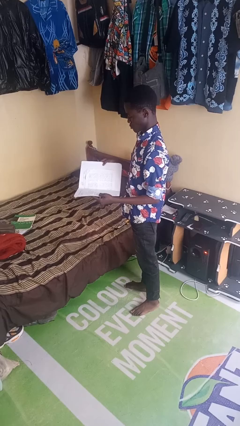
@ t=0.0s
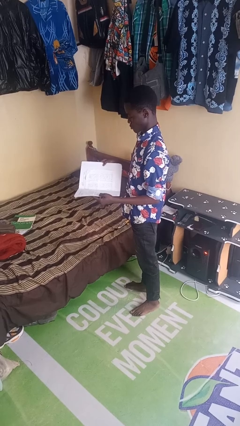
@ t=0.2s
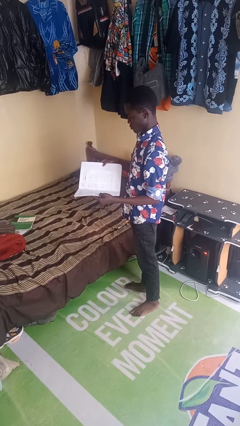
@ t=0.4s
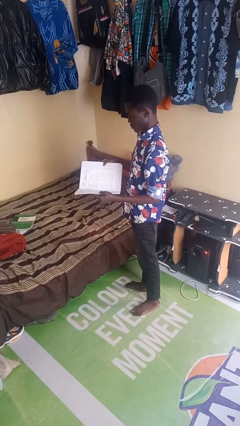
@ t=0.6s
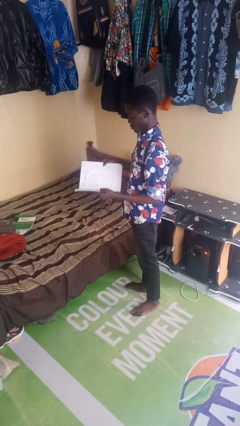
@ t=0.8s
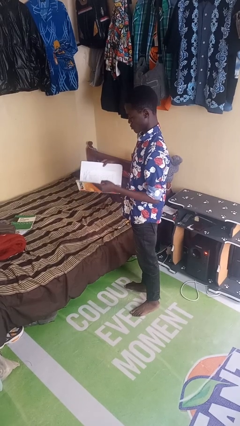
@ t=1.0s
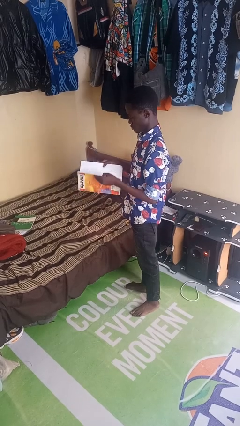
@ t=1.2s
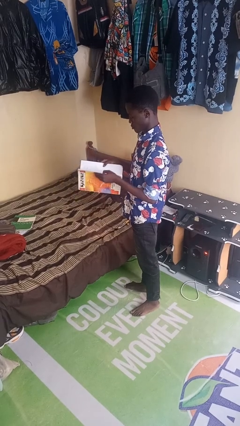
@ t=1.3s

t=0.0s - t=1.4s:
person reads book

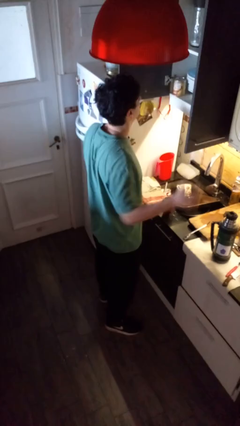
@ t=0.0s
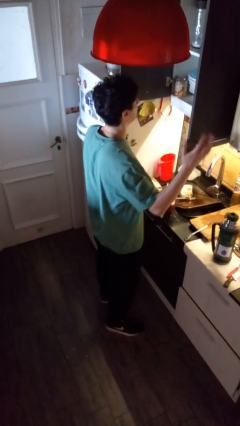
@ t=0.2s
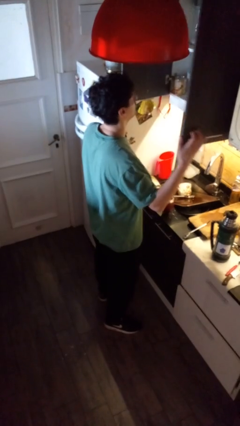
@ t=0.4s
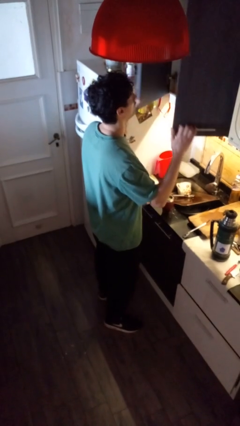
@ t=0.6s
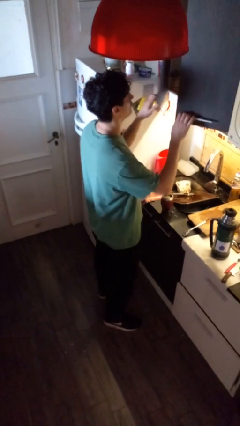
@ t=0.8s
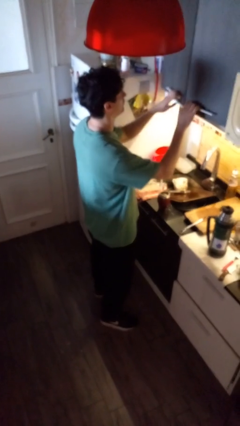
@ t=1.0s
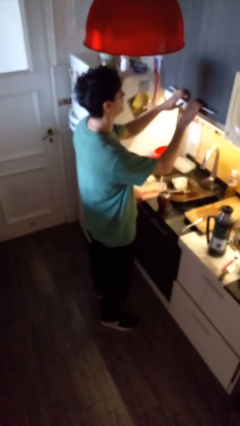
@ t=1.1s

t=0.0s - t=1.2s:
person closes kitchen drawer

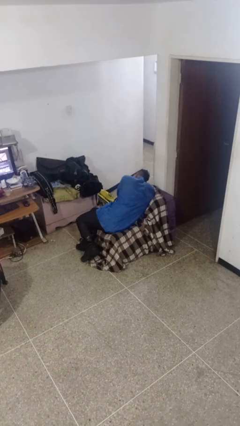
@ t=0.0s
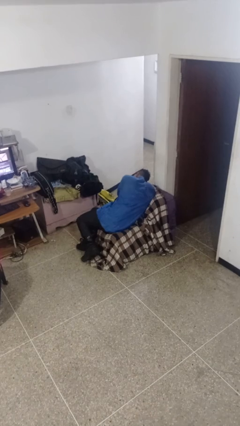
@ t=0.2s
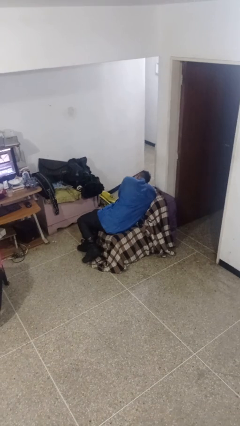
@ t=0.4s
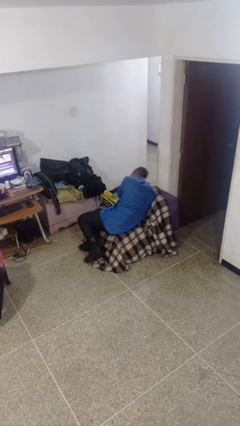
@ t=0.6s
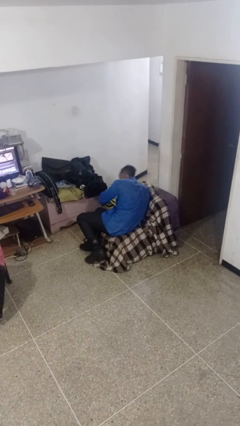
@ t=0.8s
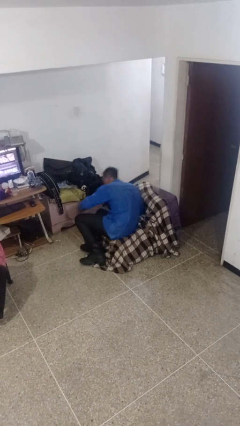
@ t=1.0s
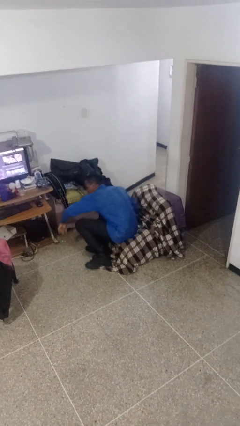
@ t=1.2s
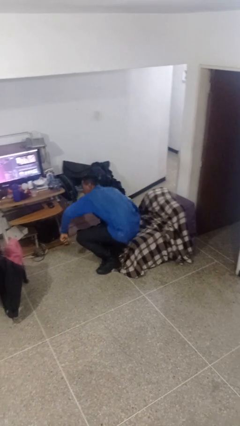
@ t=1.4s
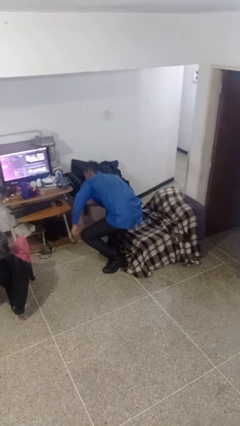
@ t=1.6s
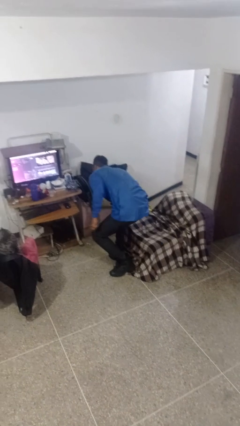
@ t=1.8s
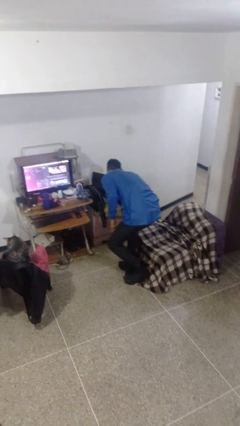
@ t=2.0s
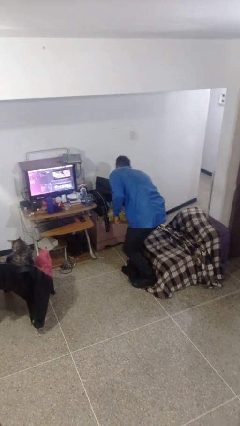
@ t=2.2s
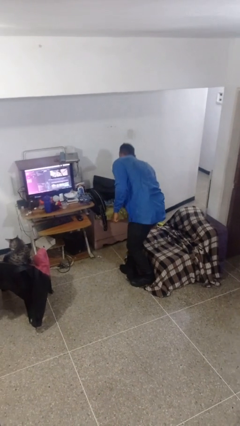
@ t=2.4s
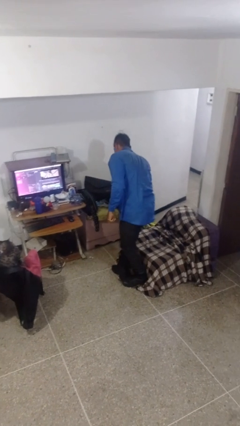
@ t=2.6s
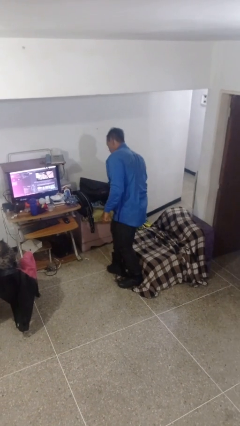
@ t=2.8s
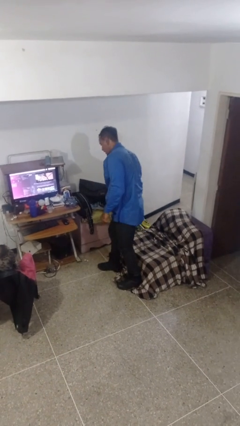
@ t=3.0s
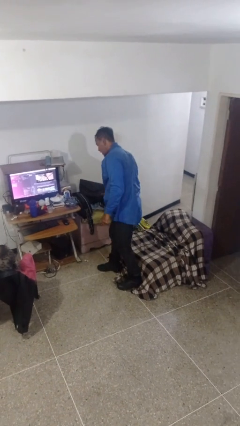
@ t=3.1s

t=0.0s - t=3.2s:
person stands up

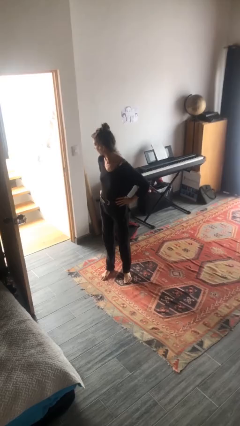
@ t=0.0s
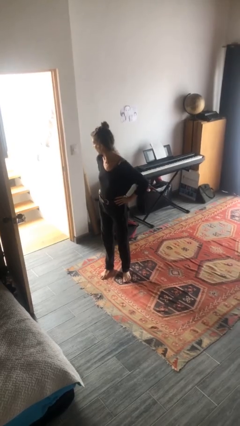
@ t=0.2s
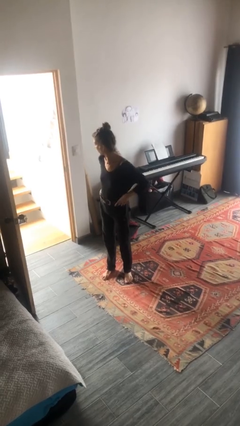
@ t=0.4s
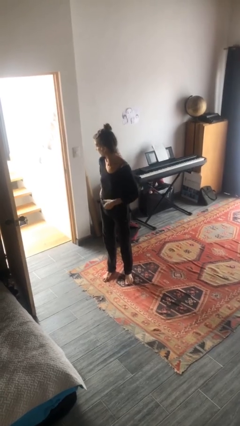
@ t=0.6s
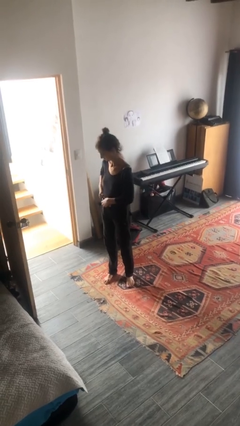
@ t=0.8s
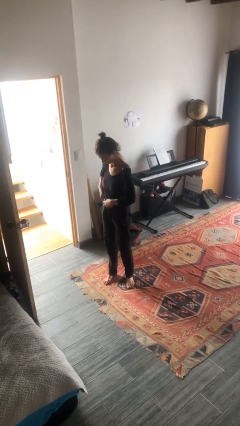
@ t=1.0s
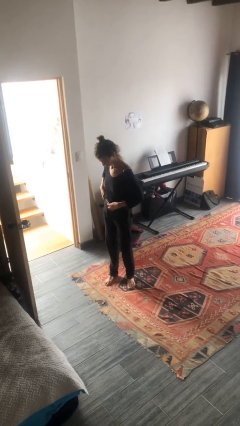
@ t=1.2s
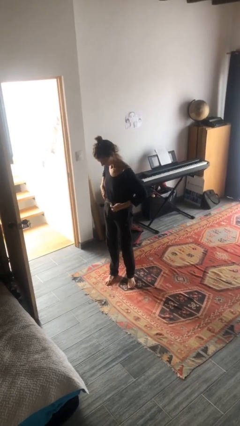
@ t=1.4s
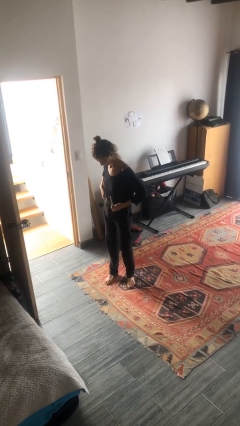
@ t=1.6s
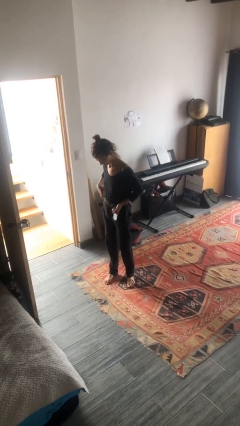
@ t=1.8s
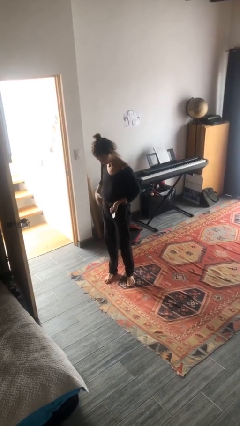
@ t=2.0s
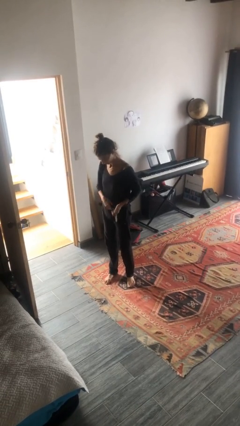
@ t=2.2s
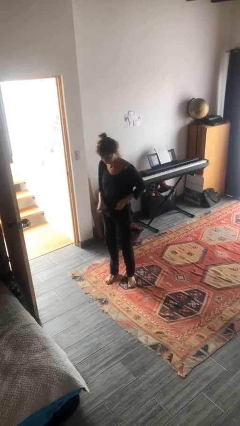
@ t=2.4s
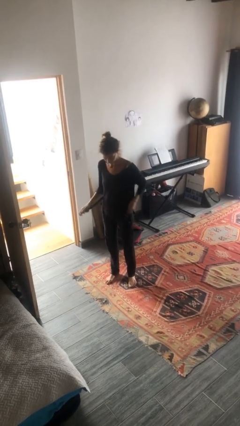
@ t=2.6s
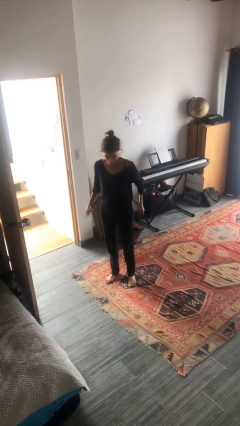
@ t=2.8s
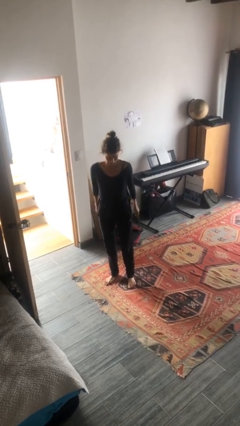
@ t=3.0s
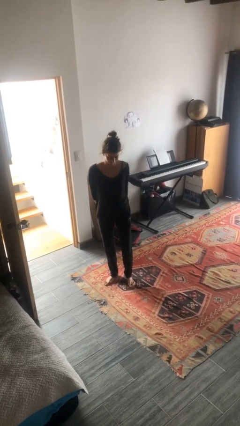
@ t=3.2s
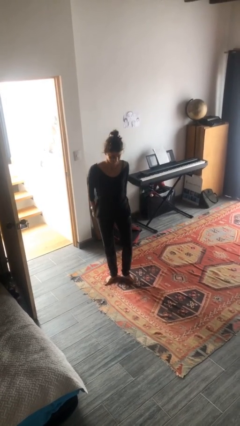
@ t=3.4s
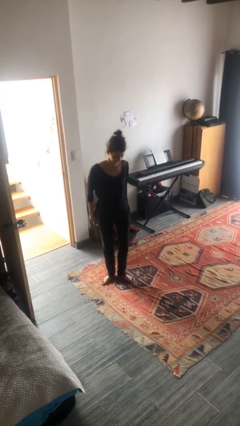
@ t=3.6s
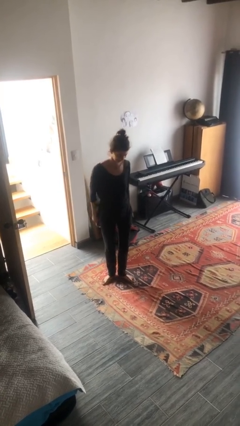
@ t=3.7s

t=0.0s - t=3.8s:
person takes off belt

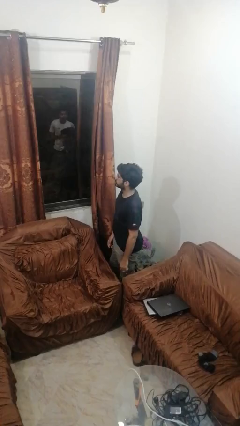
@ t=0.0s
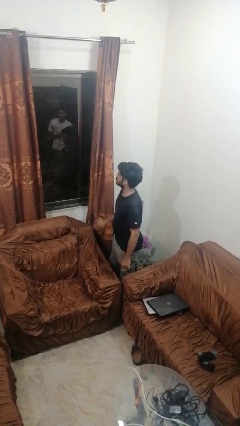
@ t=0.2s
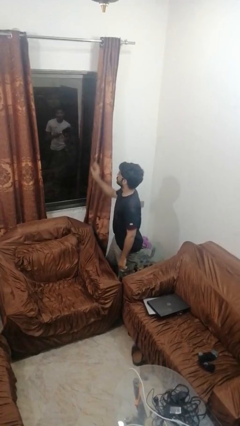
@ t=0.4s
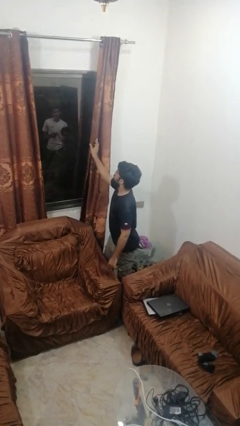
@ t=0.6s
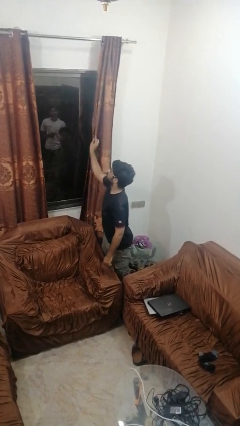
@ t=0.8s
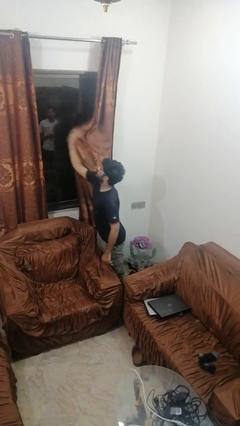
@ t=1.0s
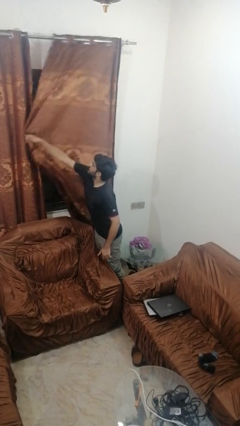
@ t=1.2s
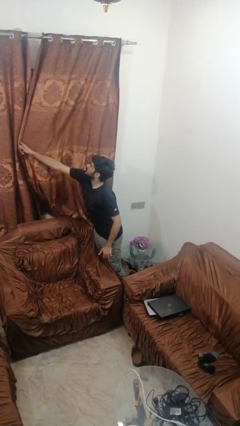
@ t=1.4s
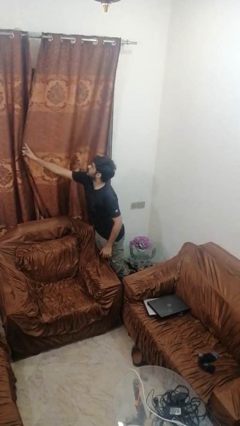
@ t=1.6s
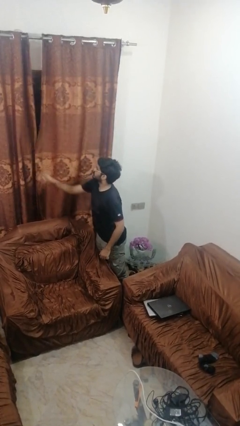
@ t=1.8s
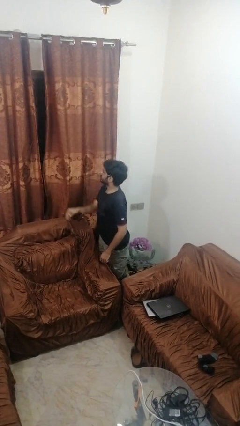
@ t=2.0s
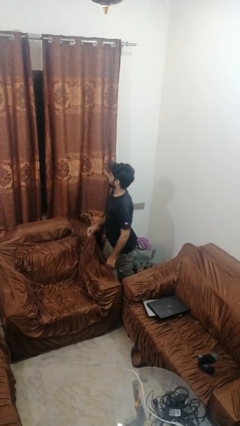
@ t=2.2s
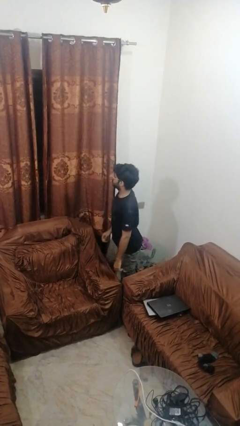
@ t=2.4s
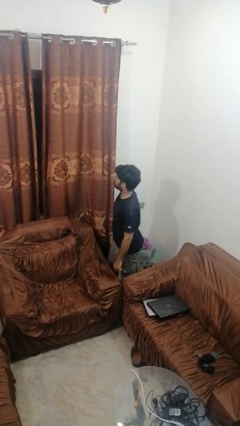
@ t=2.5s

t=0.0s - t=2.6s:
person closes curtains

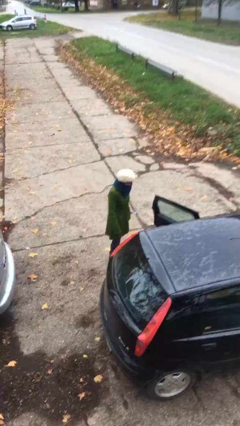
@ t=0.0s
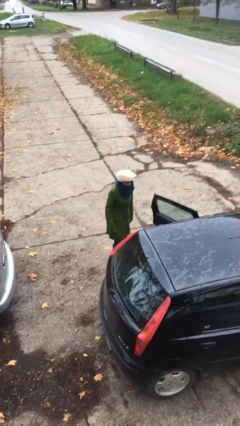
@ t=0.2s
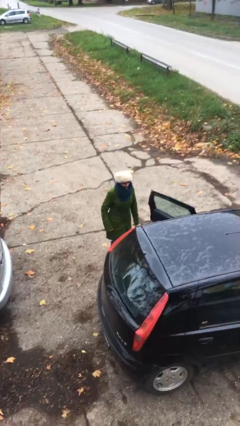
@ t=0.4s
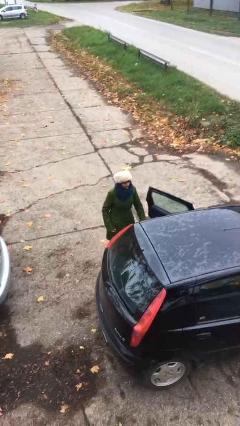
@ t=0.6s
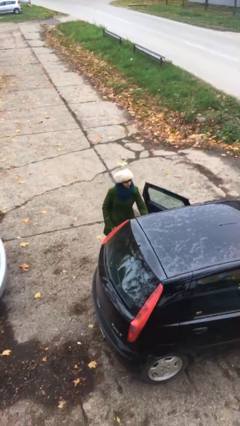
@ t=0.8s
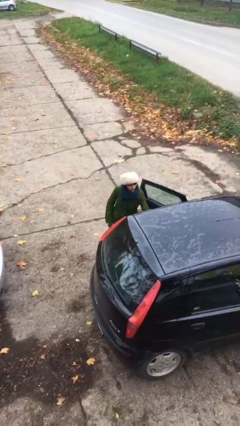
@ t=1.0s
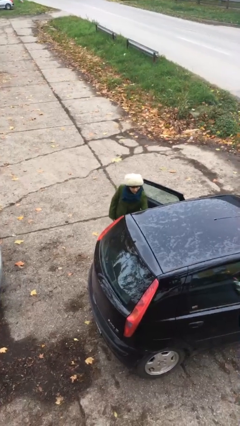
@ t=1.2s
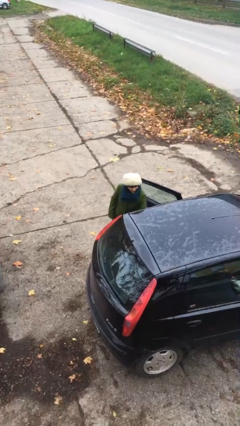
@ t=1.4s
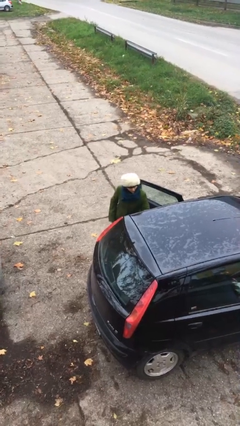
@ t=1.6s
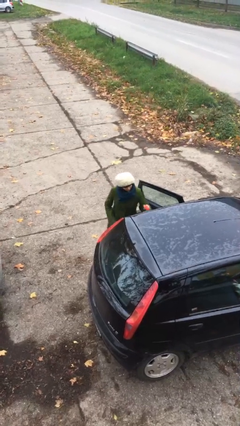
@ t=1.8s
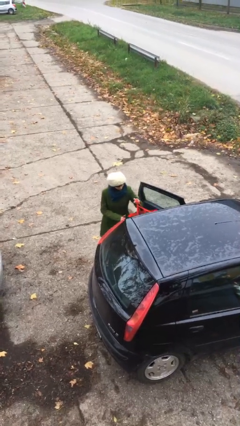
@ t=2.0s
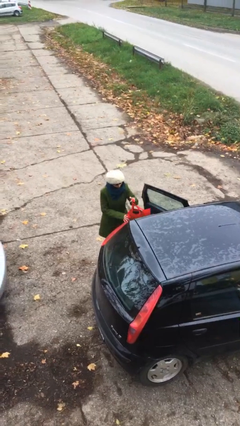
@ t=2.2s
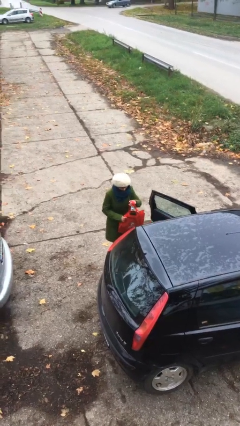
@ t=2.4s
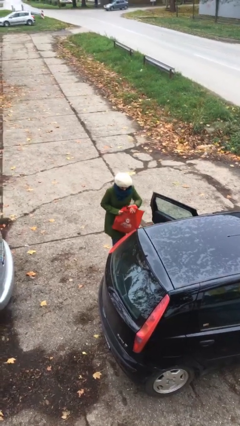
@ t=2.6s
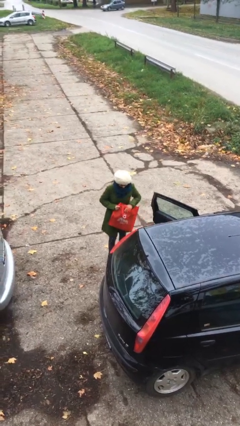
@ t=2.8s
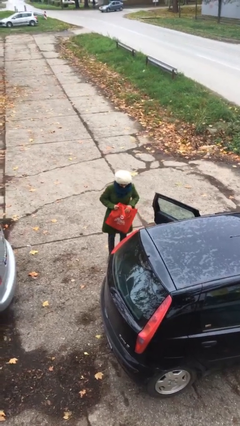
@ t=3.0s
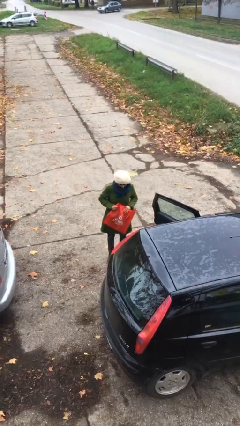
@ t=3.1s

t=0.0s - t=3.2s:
person unloads car

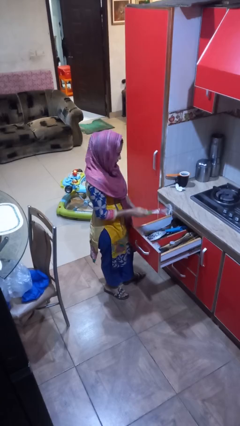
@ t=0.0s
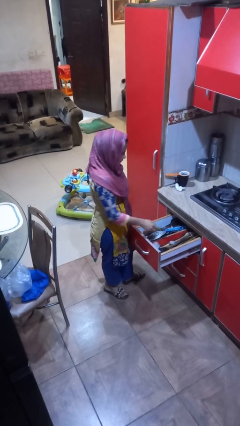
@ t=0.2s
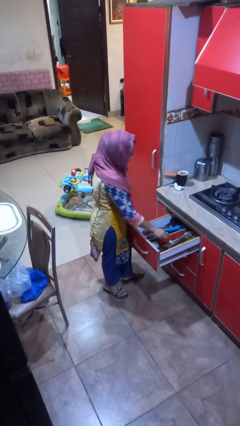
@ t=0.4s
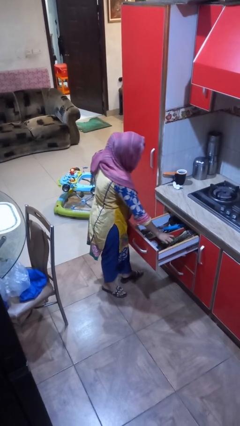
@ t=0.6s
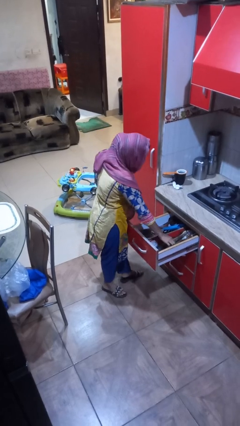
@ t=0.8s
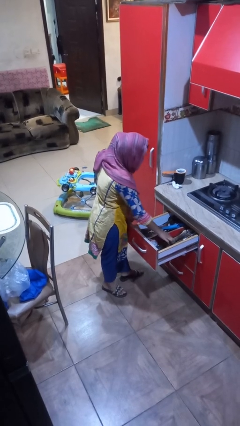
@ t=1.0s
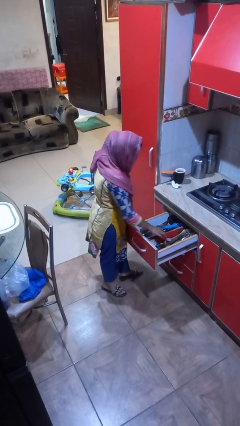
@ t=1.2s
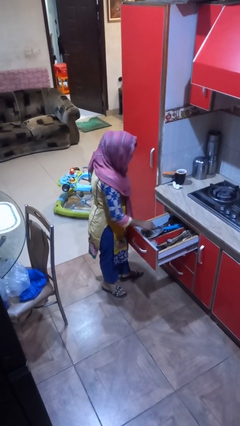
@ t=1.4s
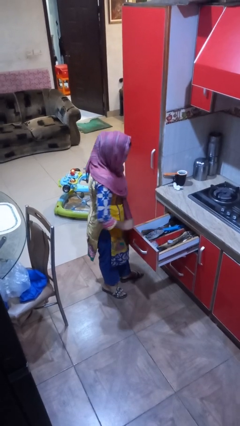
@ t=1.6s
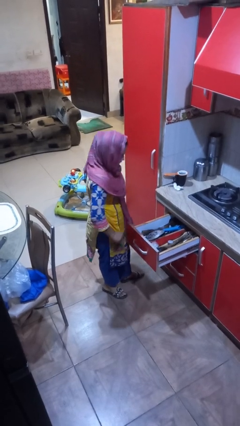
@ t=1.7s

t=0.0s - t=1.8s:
person puts object into kitchen drawer
